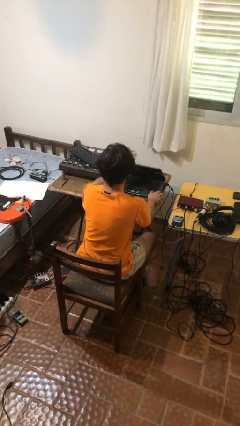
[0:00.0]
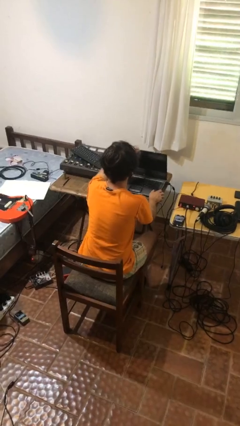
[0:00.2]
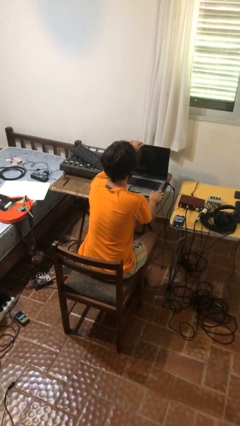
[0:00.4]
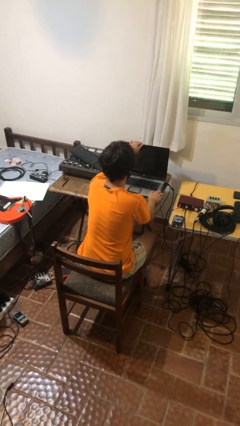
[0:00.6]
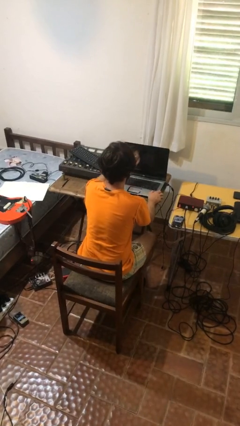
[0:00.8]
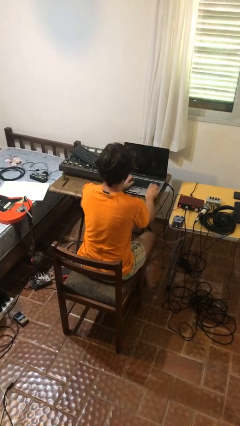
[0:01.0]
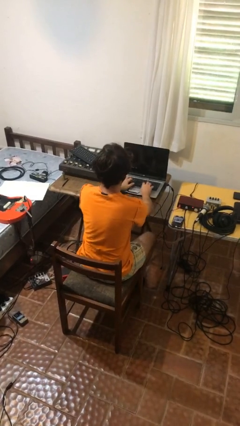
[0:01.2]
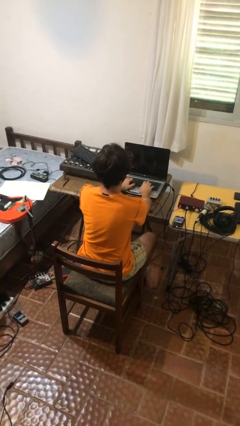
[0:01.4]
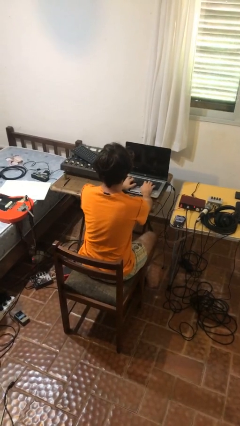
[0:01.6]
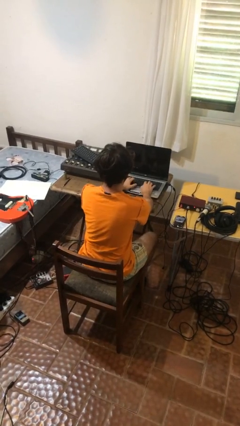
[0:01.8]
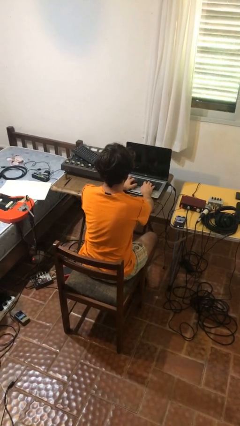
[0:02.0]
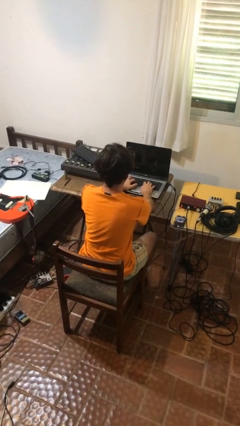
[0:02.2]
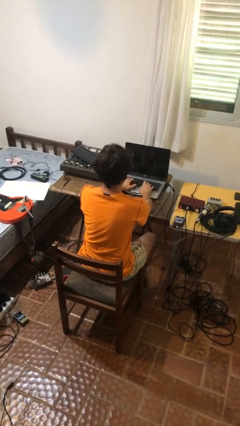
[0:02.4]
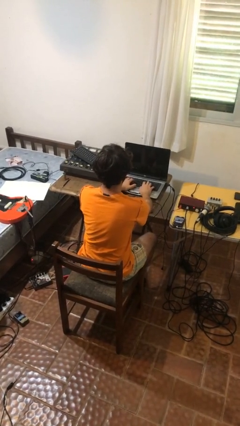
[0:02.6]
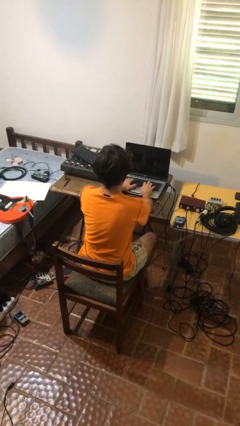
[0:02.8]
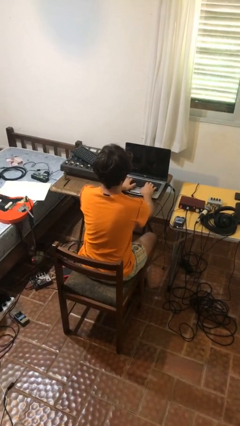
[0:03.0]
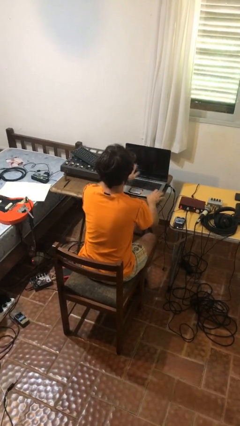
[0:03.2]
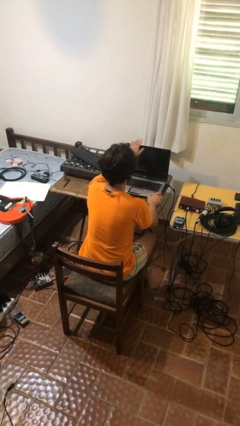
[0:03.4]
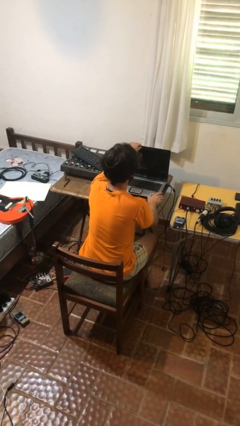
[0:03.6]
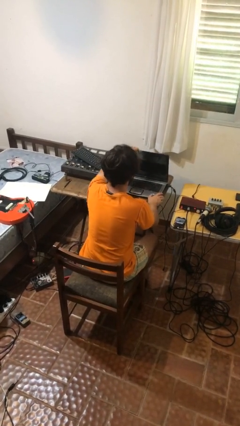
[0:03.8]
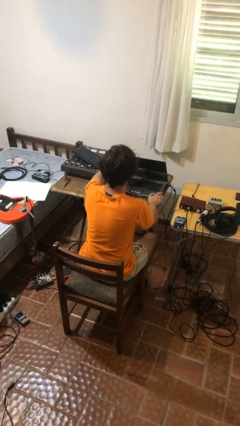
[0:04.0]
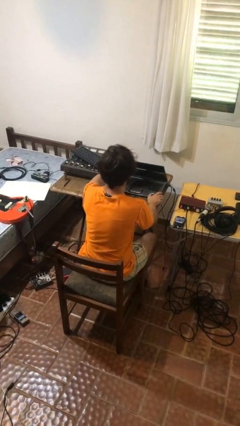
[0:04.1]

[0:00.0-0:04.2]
person interacts with laptop

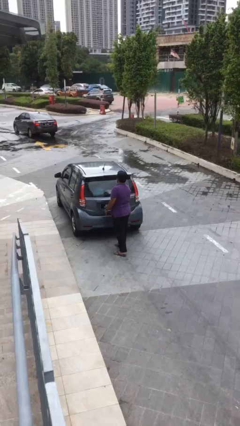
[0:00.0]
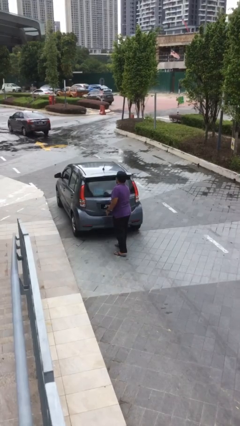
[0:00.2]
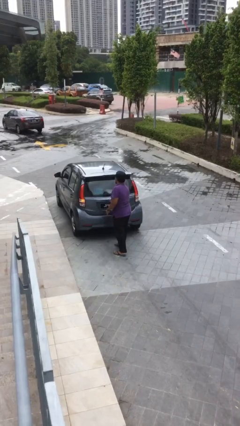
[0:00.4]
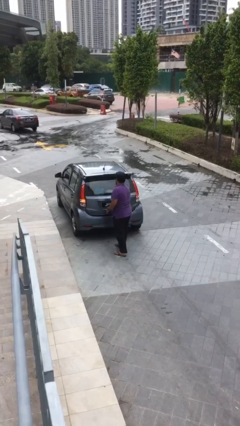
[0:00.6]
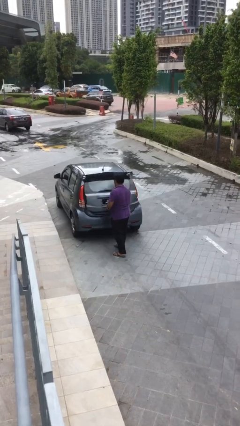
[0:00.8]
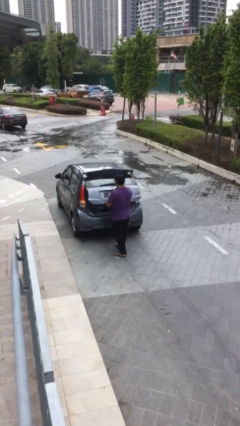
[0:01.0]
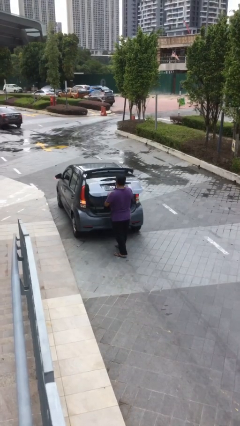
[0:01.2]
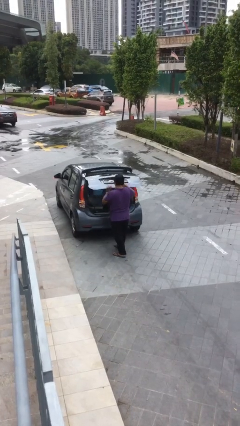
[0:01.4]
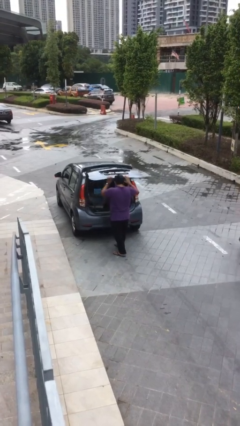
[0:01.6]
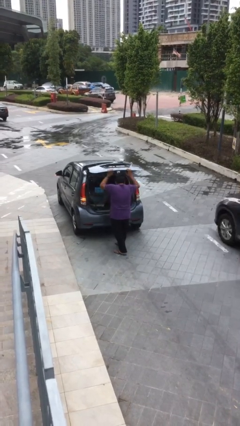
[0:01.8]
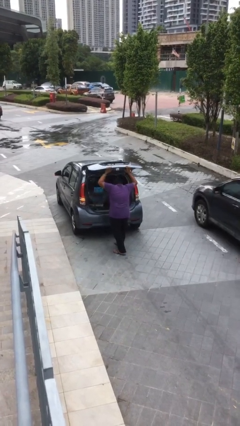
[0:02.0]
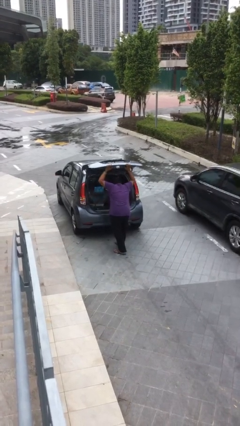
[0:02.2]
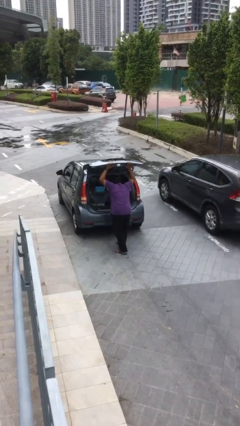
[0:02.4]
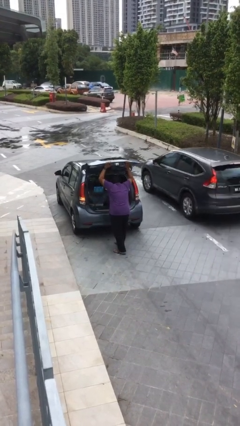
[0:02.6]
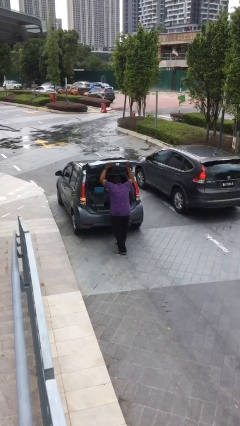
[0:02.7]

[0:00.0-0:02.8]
person opens car trunk

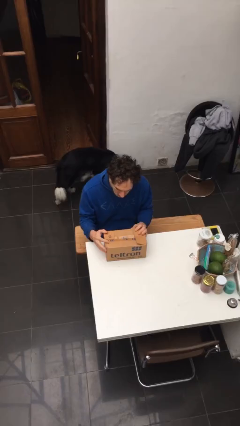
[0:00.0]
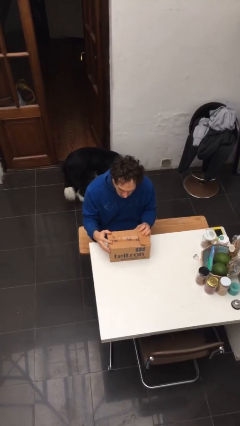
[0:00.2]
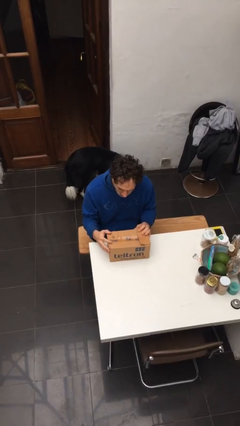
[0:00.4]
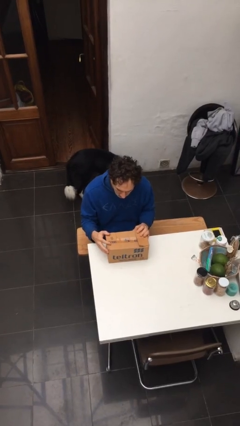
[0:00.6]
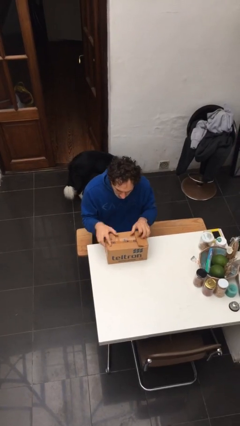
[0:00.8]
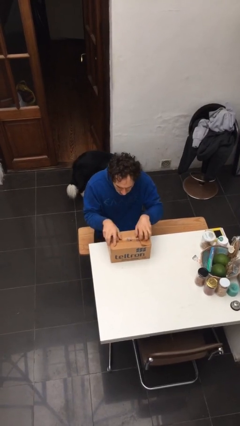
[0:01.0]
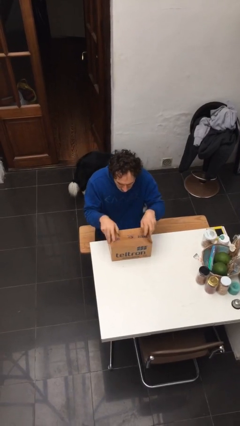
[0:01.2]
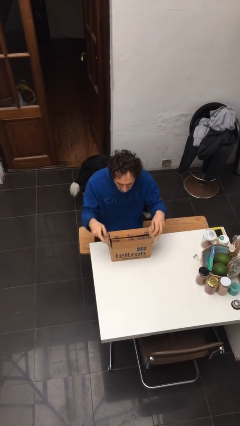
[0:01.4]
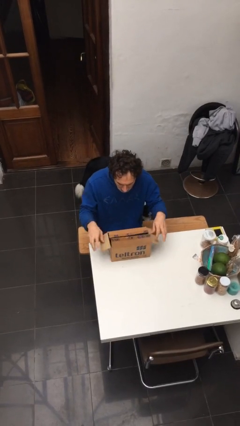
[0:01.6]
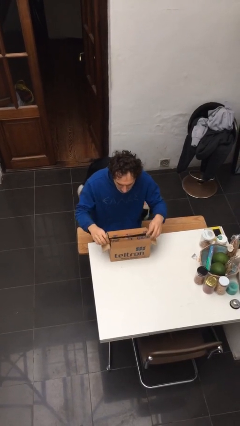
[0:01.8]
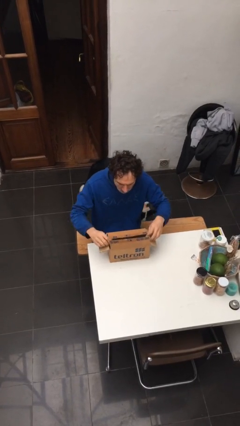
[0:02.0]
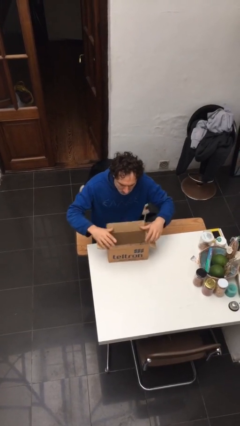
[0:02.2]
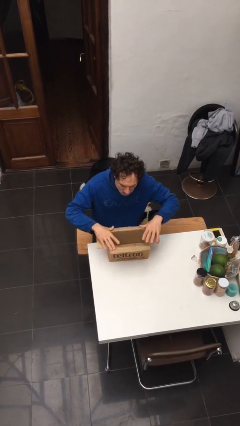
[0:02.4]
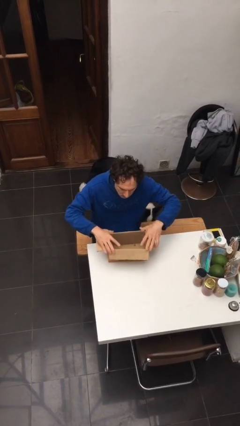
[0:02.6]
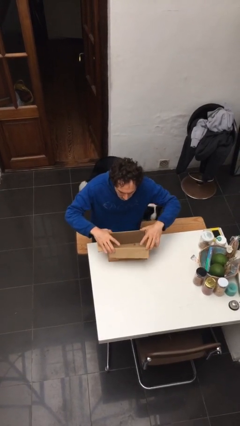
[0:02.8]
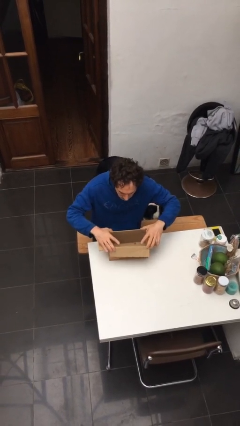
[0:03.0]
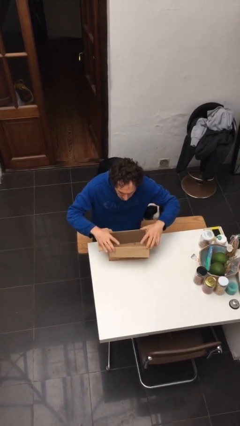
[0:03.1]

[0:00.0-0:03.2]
person opens box

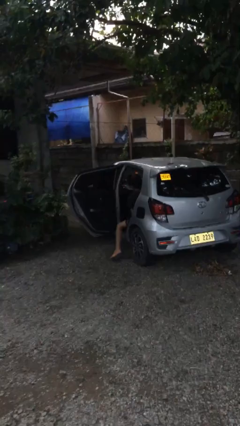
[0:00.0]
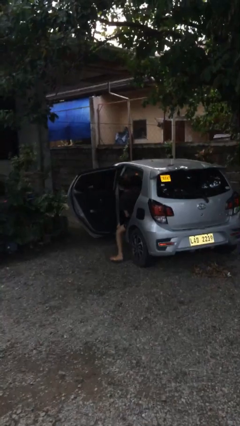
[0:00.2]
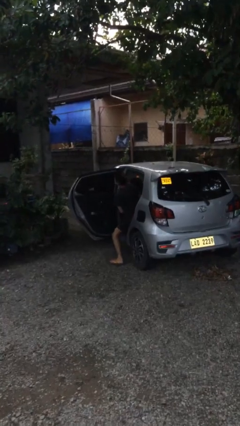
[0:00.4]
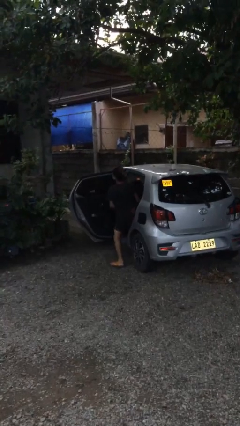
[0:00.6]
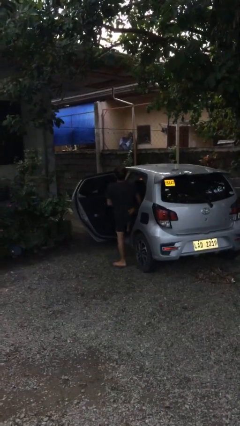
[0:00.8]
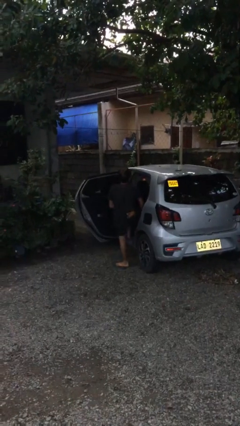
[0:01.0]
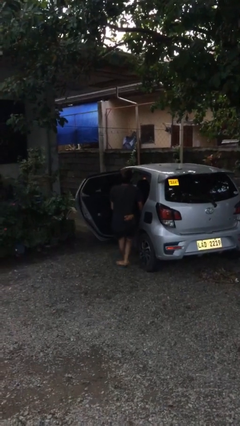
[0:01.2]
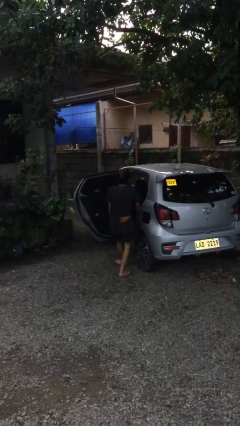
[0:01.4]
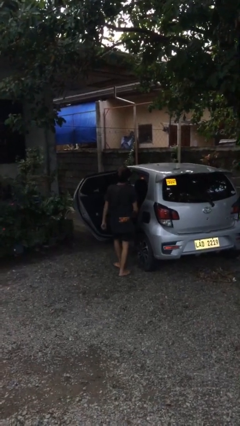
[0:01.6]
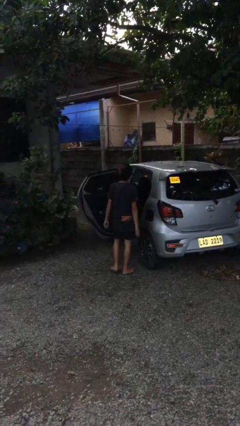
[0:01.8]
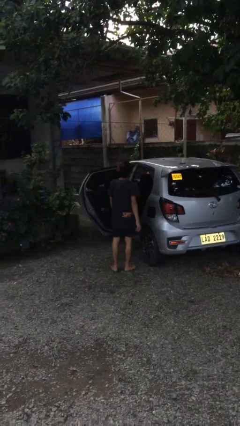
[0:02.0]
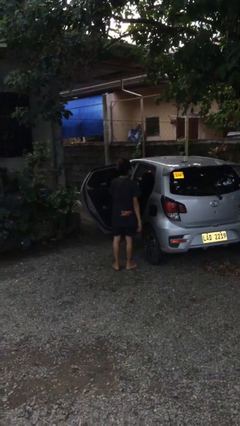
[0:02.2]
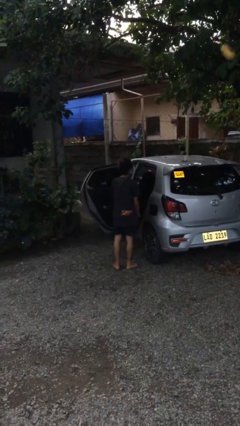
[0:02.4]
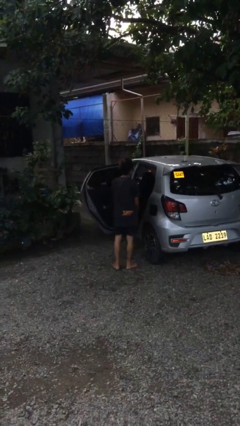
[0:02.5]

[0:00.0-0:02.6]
person exits car

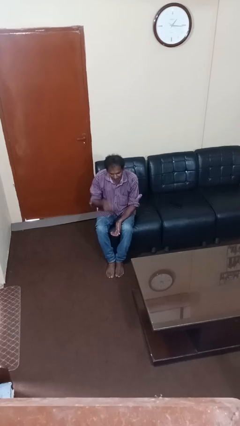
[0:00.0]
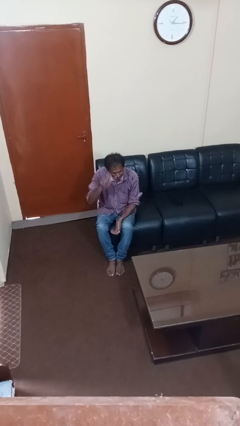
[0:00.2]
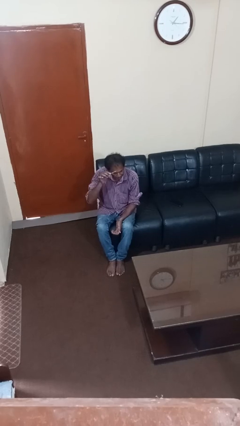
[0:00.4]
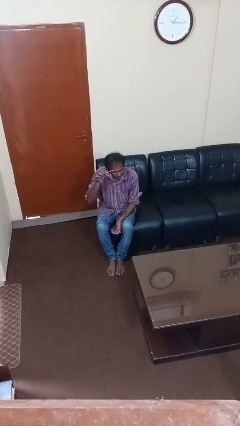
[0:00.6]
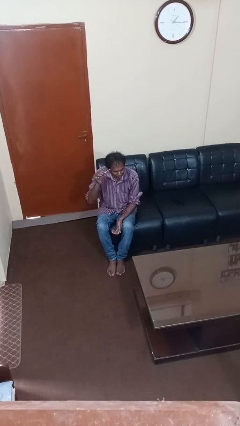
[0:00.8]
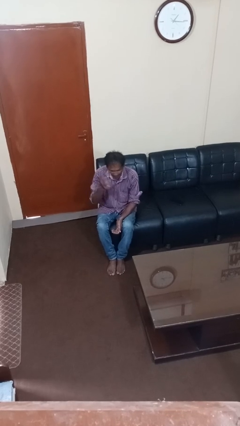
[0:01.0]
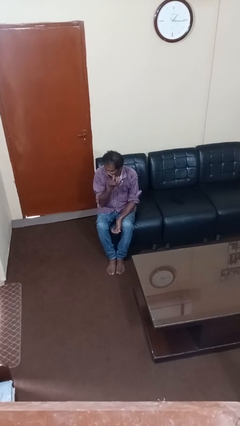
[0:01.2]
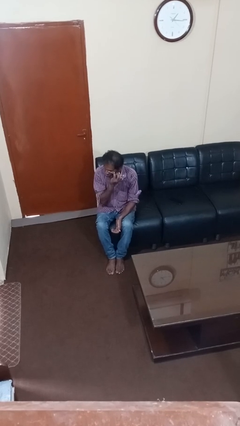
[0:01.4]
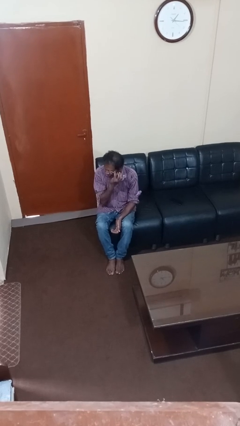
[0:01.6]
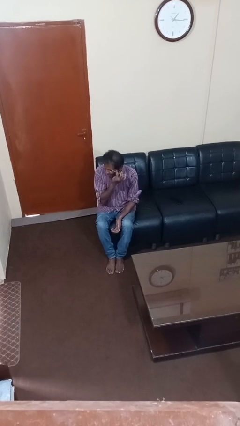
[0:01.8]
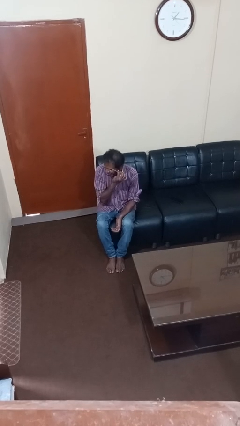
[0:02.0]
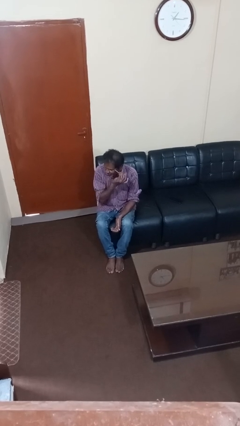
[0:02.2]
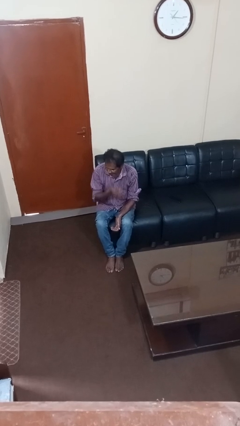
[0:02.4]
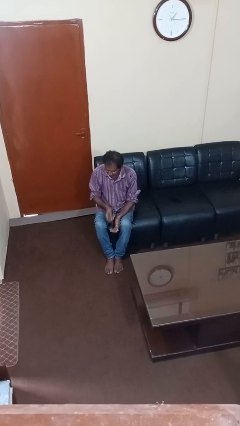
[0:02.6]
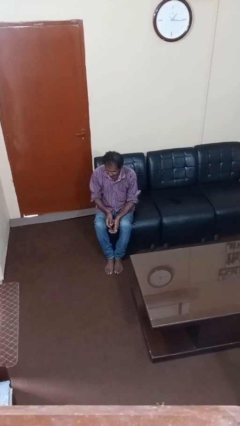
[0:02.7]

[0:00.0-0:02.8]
person applies eye makeup

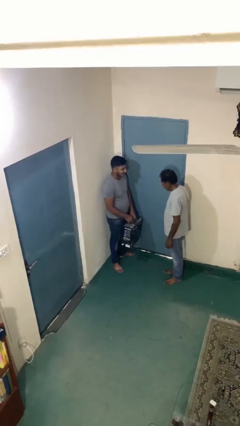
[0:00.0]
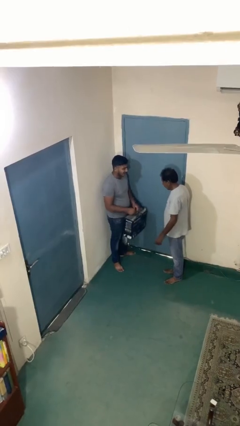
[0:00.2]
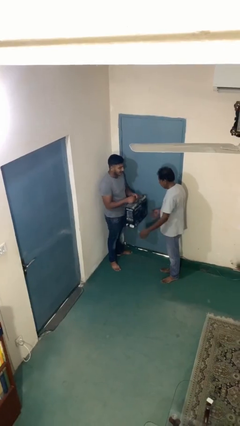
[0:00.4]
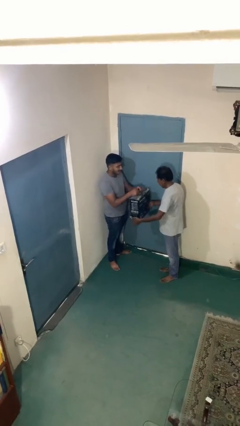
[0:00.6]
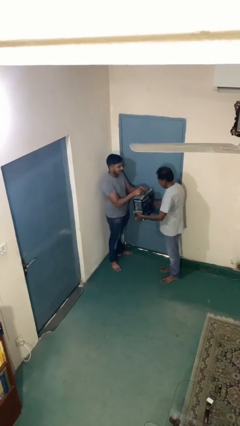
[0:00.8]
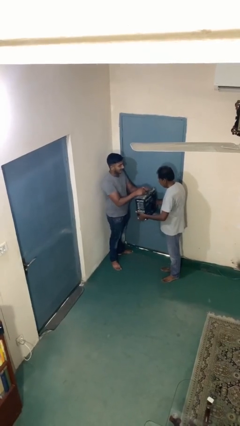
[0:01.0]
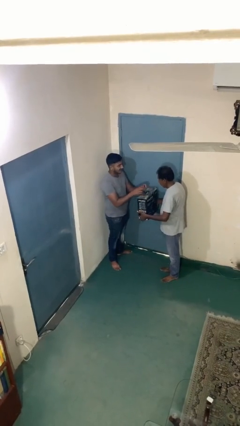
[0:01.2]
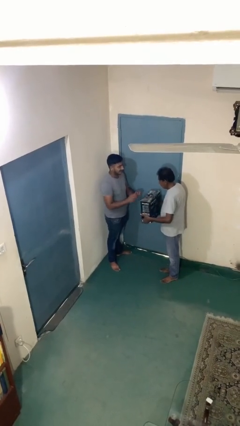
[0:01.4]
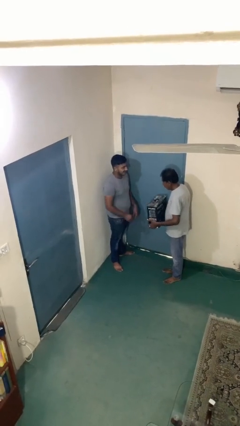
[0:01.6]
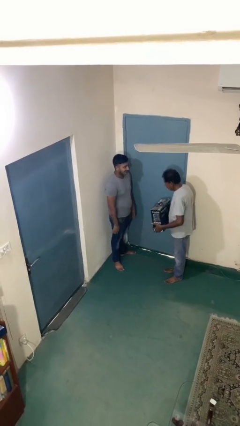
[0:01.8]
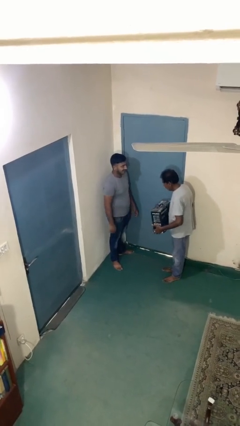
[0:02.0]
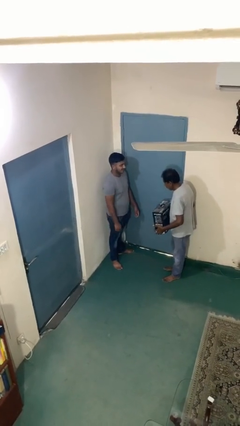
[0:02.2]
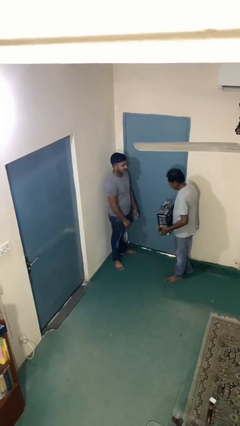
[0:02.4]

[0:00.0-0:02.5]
person transfers object to person
